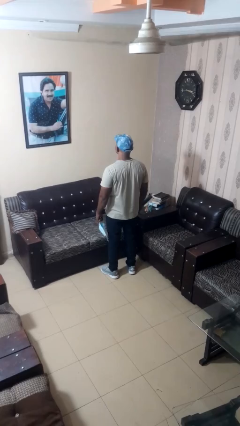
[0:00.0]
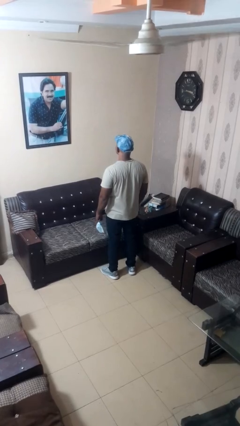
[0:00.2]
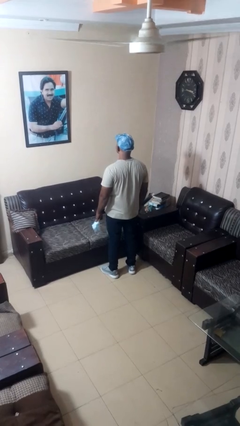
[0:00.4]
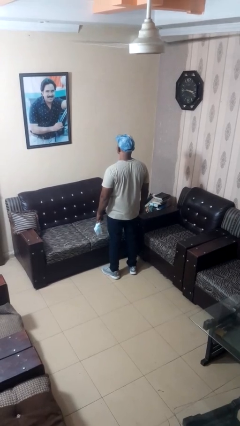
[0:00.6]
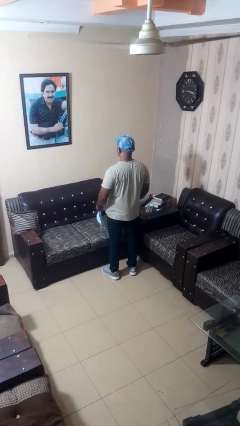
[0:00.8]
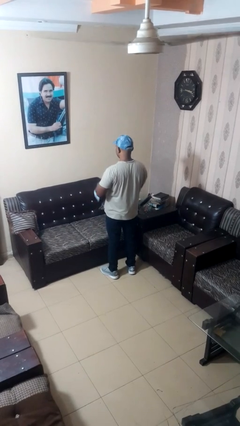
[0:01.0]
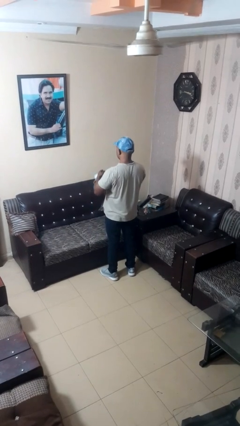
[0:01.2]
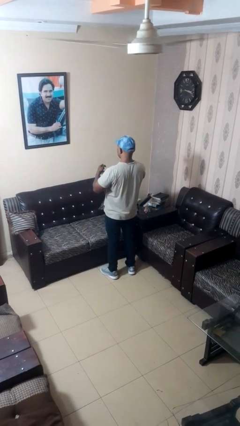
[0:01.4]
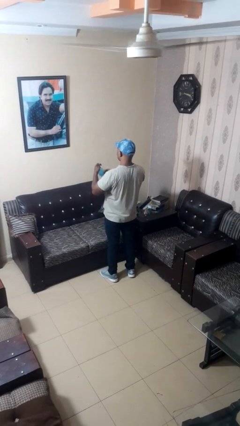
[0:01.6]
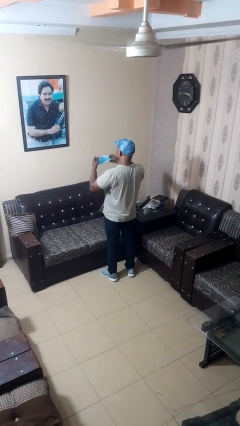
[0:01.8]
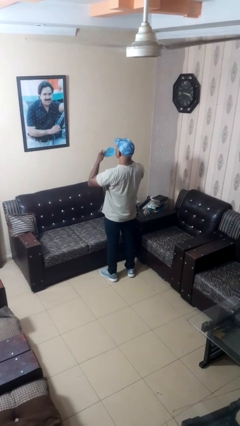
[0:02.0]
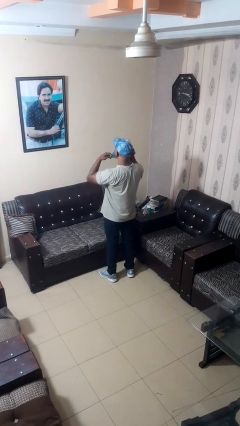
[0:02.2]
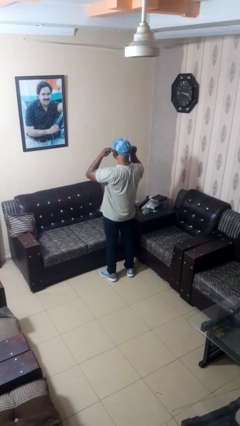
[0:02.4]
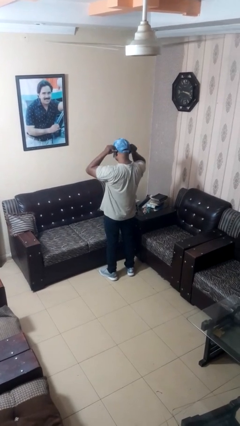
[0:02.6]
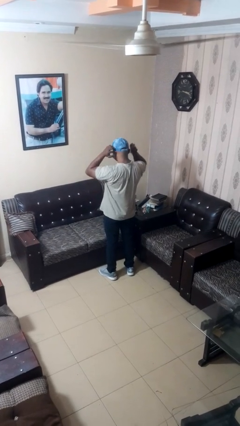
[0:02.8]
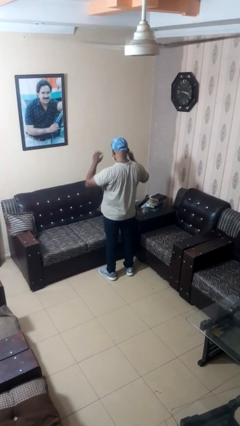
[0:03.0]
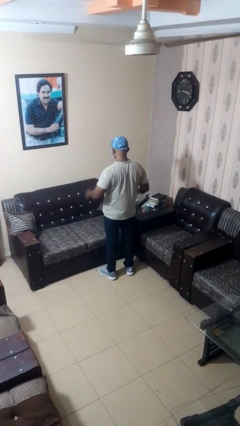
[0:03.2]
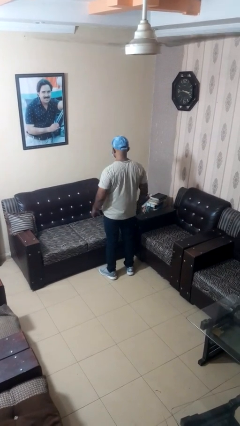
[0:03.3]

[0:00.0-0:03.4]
person puts on facemask

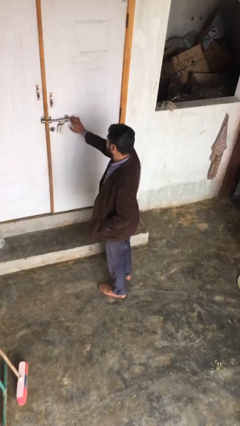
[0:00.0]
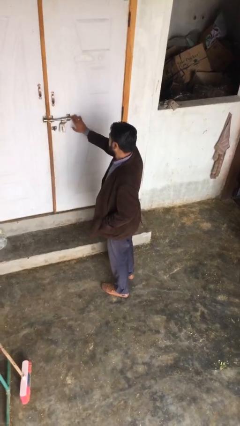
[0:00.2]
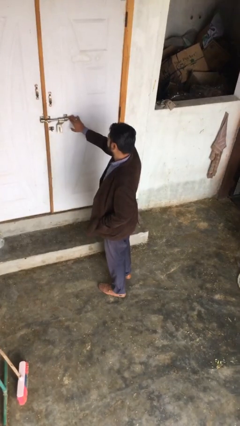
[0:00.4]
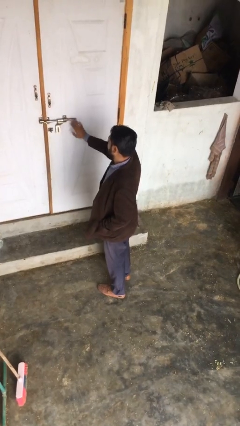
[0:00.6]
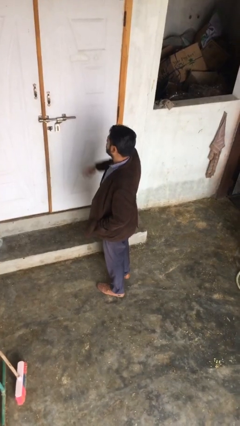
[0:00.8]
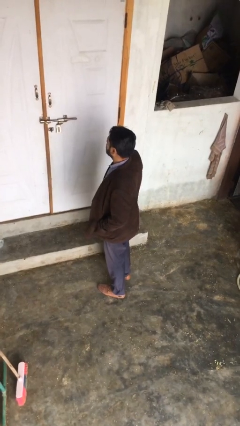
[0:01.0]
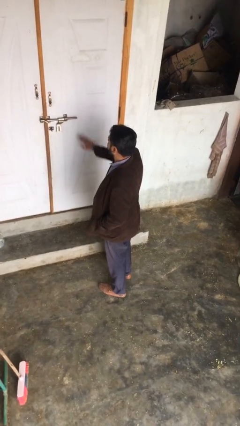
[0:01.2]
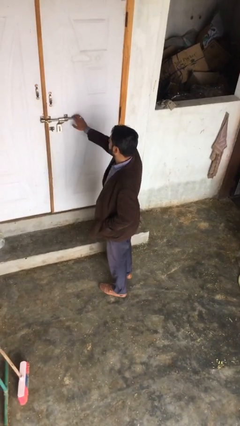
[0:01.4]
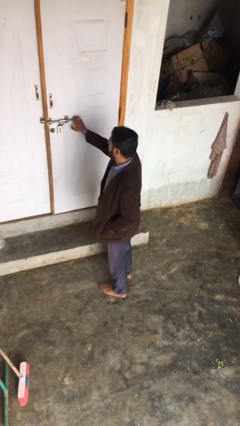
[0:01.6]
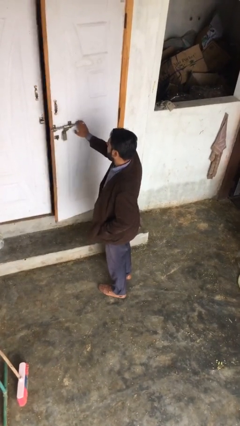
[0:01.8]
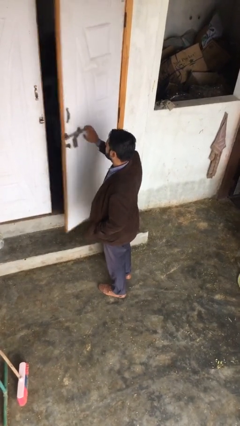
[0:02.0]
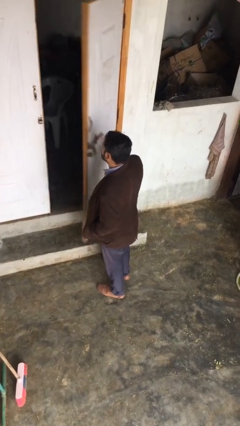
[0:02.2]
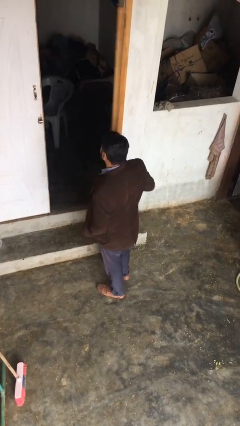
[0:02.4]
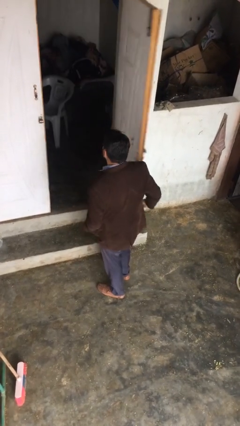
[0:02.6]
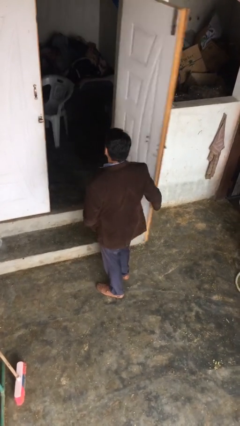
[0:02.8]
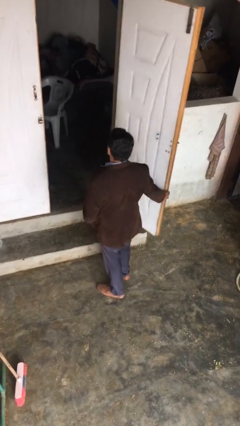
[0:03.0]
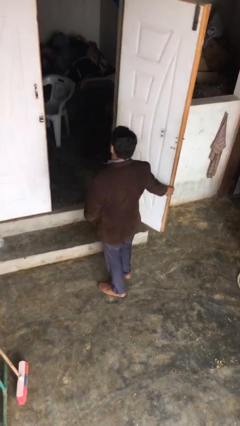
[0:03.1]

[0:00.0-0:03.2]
person opens facility door

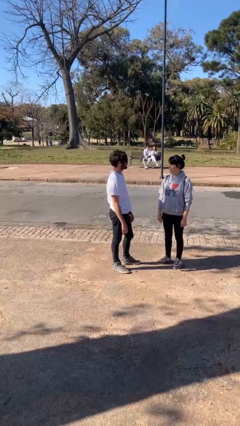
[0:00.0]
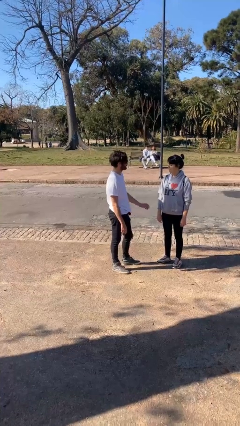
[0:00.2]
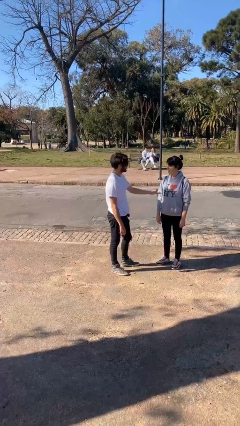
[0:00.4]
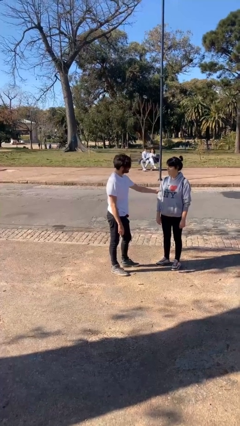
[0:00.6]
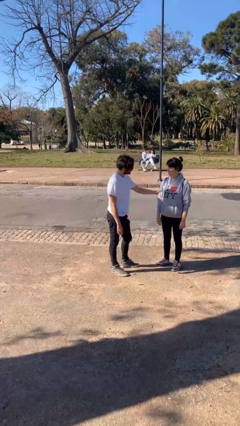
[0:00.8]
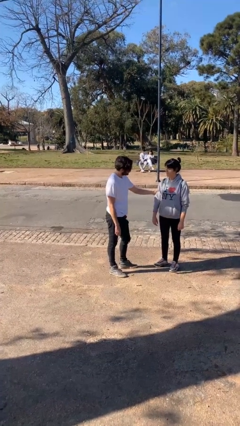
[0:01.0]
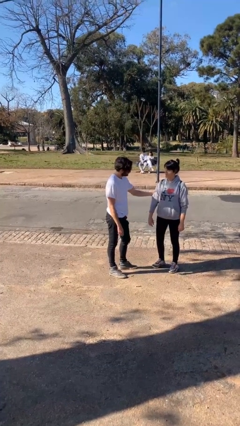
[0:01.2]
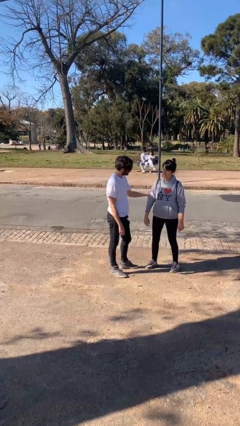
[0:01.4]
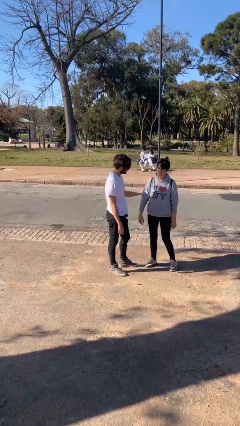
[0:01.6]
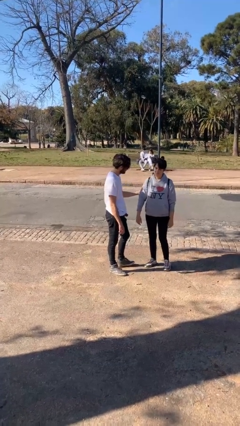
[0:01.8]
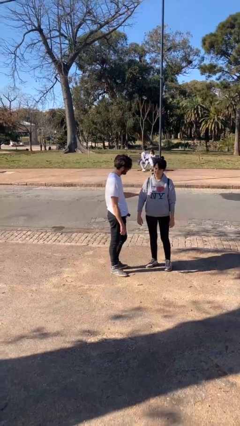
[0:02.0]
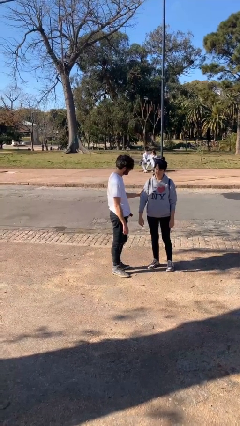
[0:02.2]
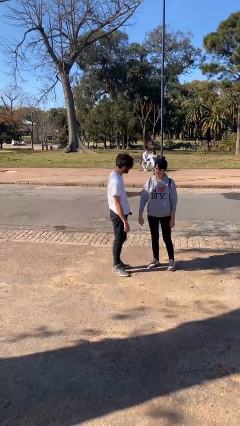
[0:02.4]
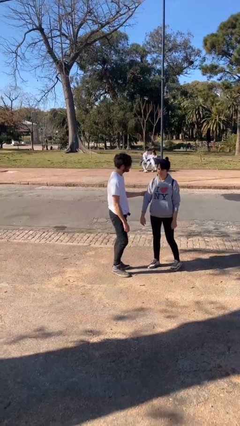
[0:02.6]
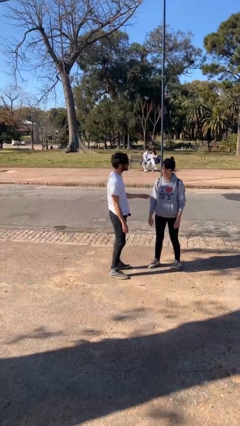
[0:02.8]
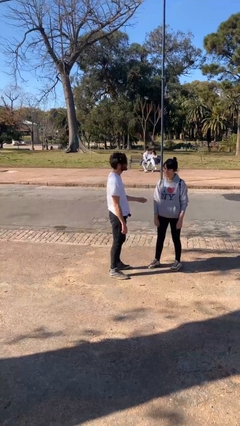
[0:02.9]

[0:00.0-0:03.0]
person grabs person by bicep

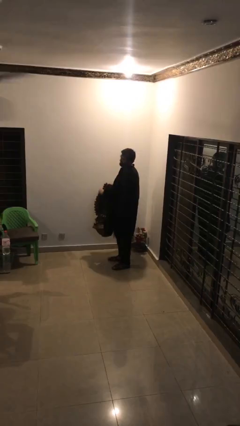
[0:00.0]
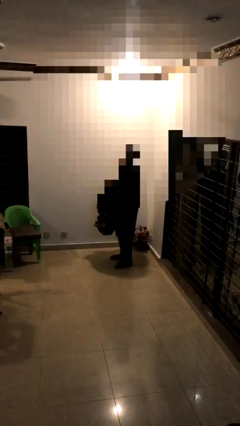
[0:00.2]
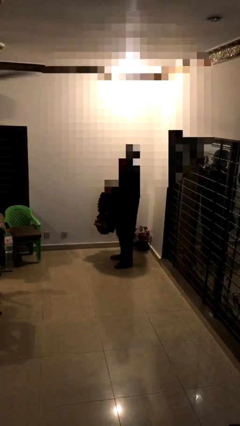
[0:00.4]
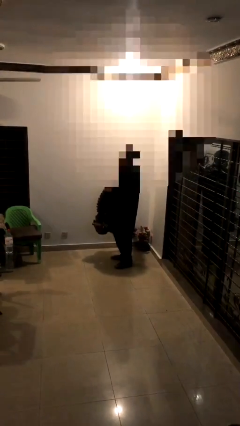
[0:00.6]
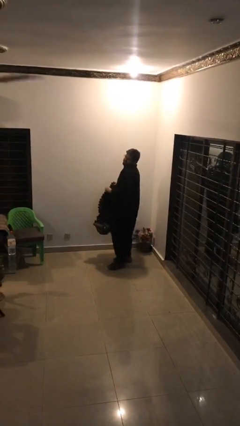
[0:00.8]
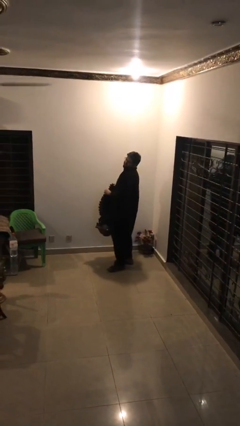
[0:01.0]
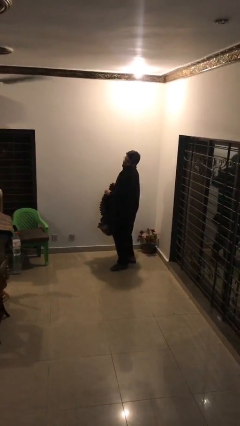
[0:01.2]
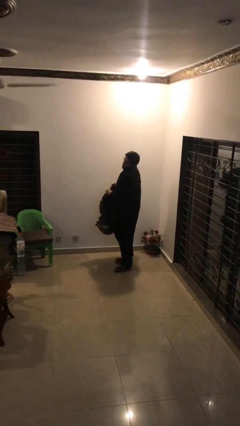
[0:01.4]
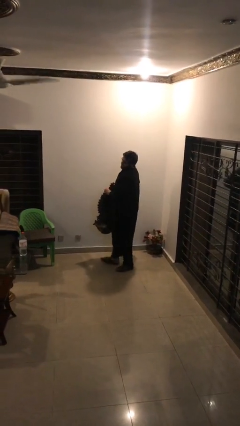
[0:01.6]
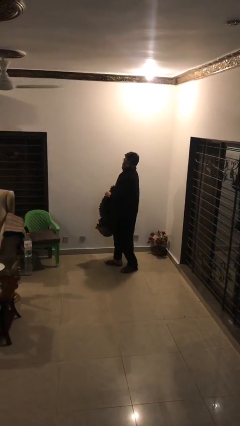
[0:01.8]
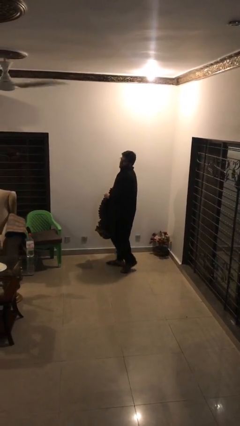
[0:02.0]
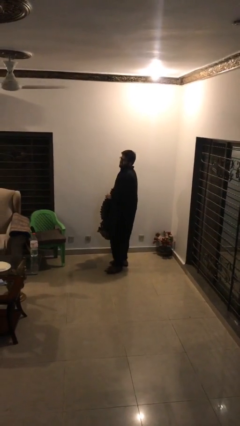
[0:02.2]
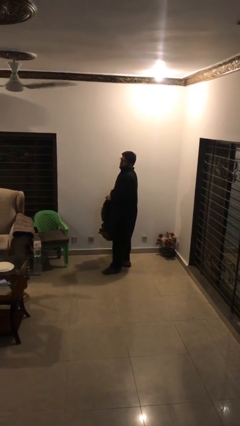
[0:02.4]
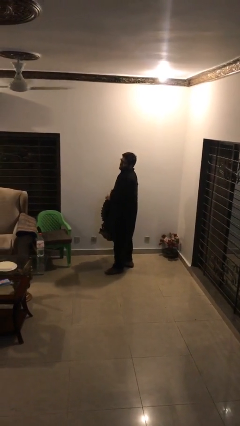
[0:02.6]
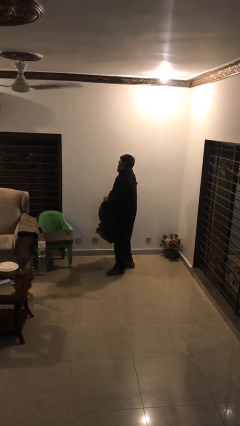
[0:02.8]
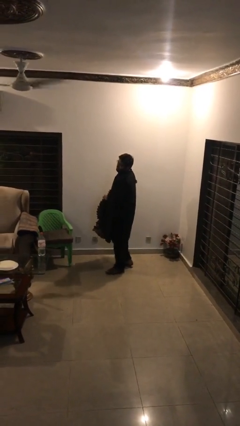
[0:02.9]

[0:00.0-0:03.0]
person carries heavy object

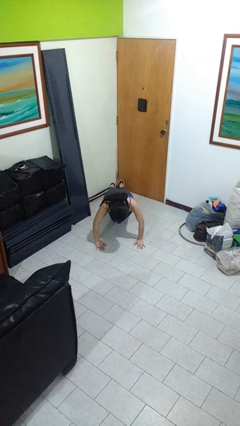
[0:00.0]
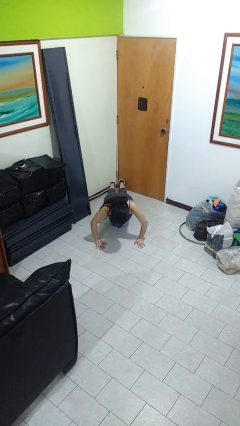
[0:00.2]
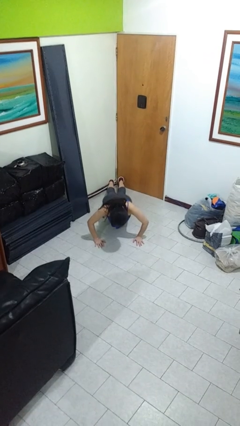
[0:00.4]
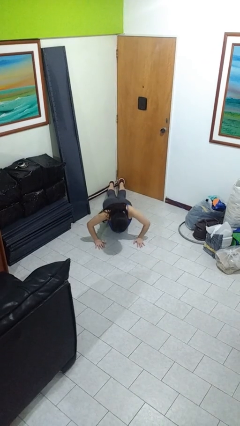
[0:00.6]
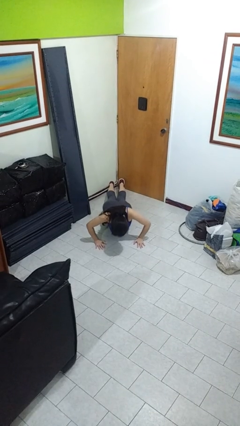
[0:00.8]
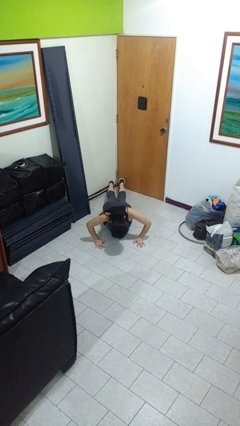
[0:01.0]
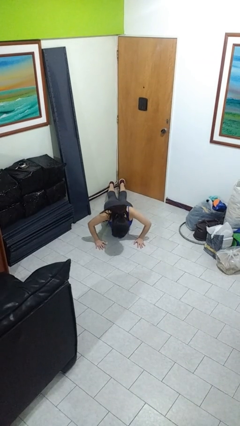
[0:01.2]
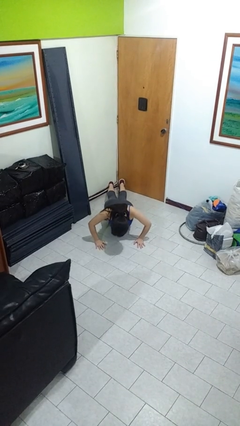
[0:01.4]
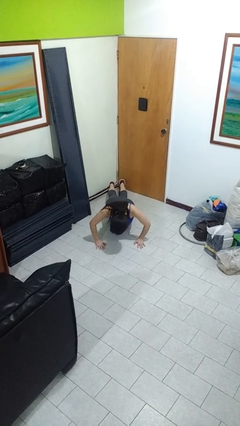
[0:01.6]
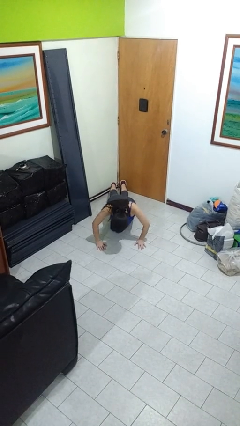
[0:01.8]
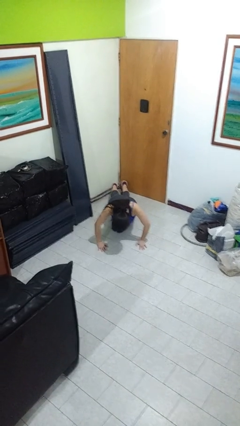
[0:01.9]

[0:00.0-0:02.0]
person exercises with pushup

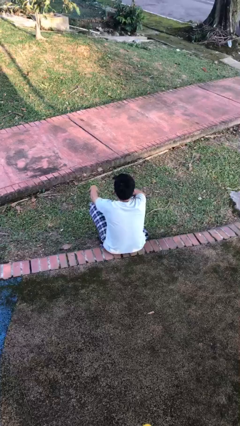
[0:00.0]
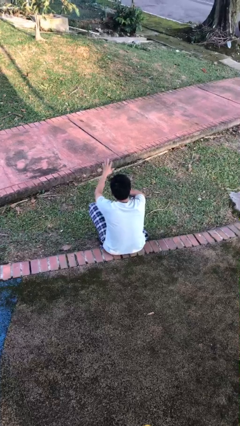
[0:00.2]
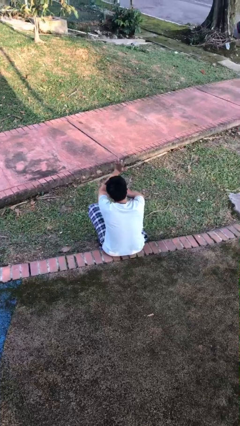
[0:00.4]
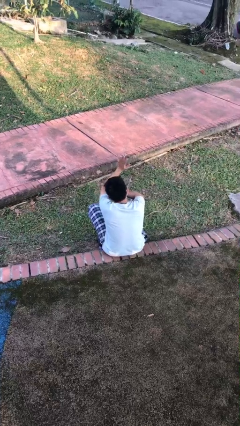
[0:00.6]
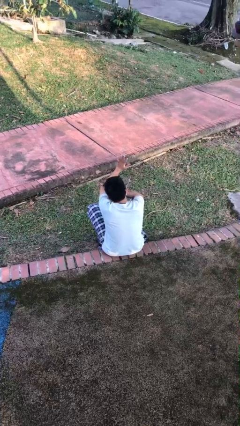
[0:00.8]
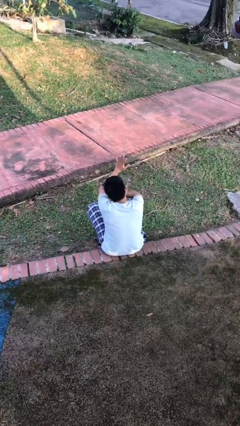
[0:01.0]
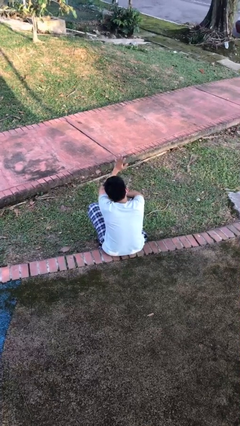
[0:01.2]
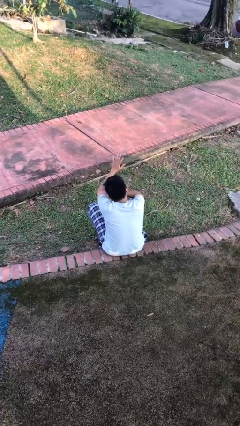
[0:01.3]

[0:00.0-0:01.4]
person gestures stop

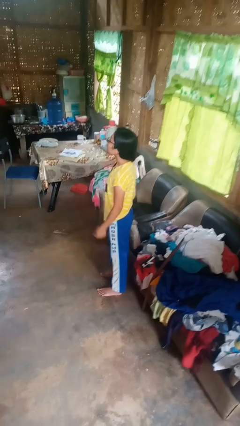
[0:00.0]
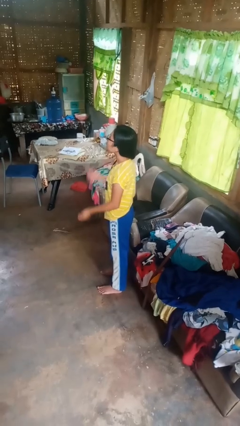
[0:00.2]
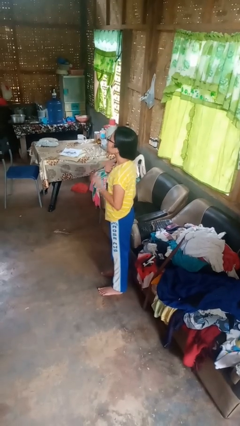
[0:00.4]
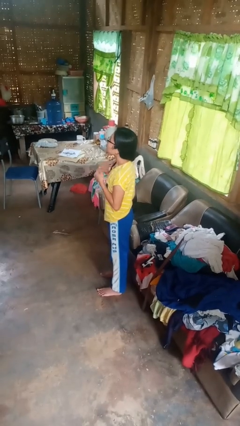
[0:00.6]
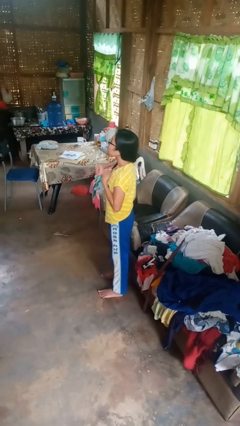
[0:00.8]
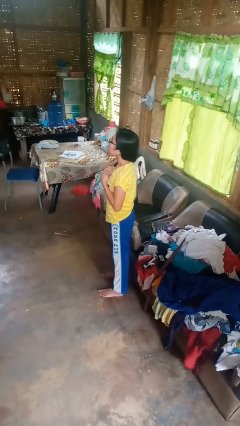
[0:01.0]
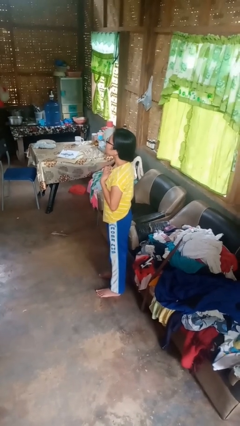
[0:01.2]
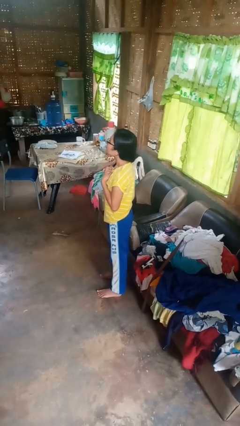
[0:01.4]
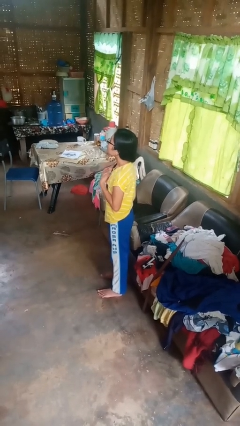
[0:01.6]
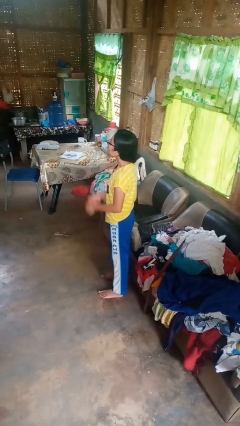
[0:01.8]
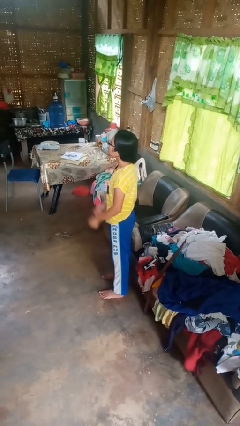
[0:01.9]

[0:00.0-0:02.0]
person drums on chest
